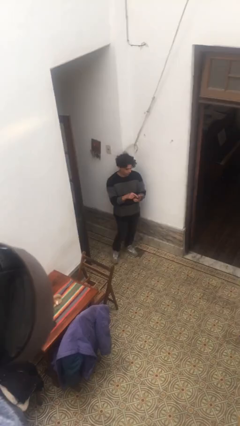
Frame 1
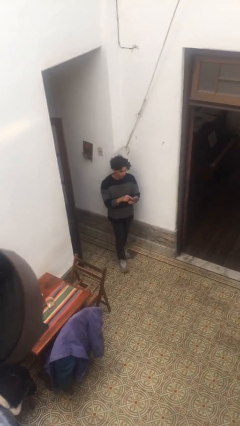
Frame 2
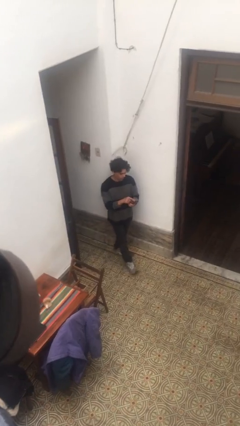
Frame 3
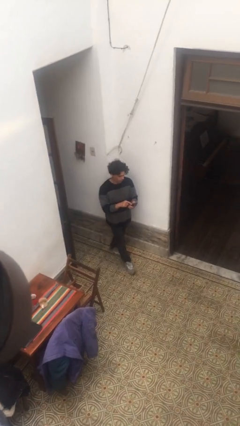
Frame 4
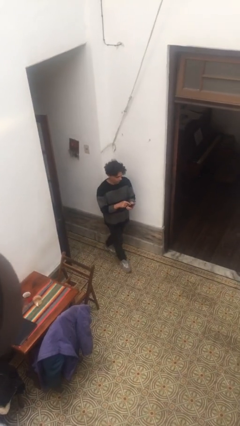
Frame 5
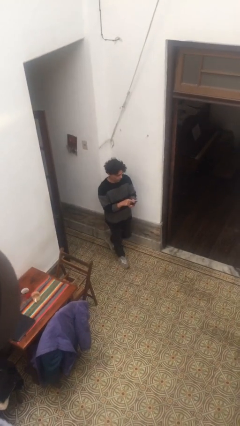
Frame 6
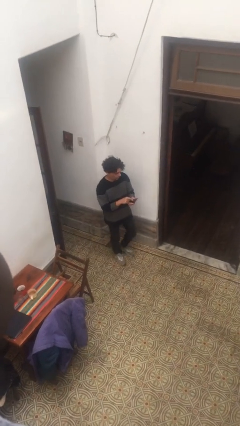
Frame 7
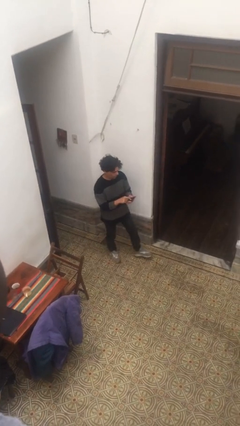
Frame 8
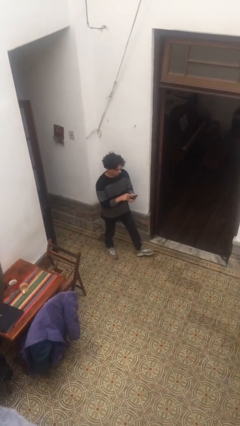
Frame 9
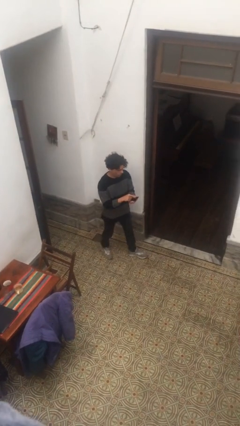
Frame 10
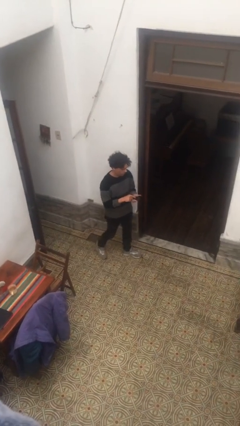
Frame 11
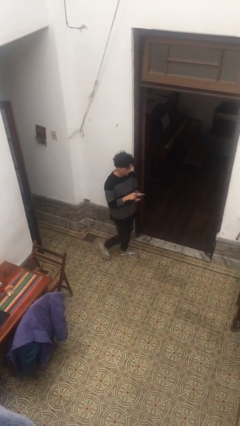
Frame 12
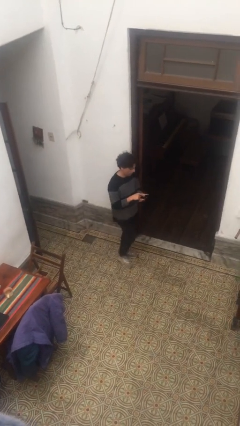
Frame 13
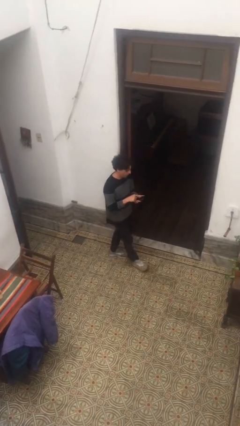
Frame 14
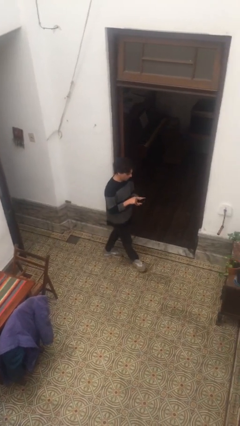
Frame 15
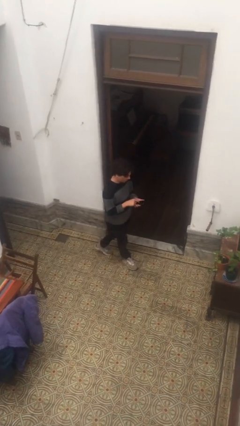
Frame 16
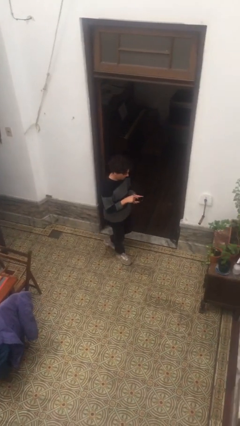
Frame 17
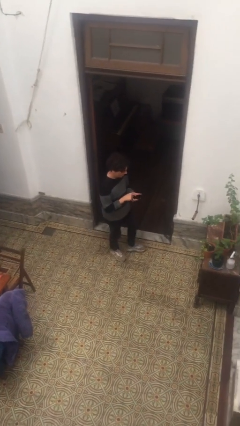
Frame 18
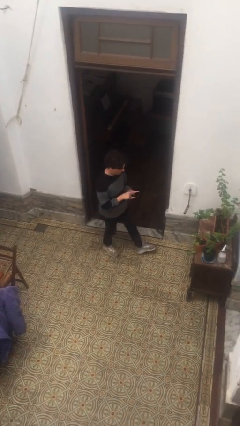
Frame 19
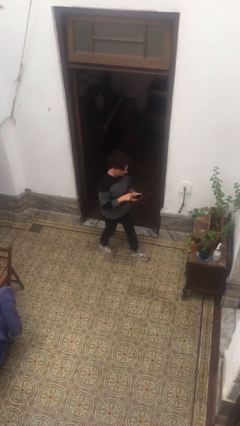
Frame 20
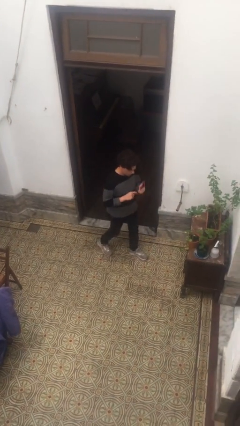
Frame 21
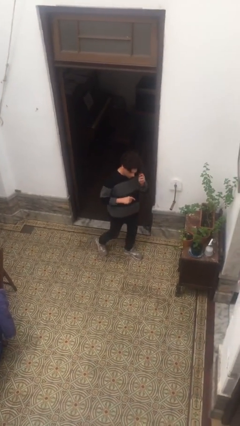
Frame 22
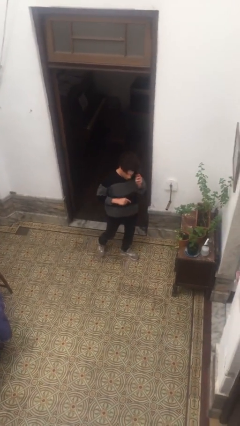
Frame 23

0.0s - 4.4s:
person texts on phone

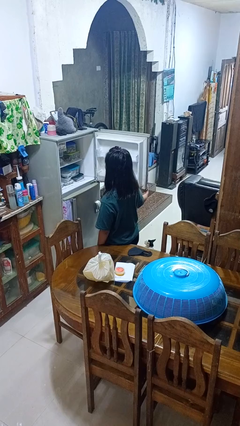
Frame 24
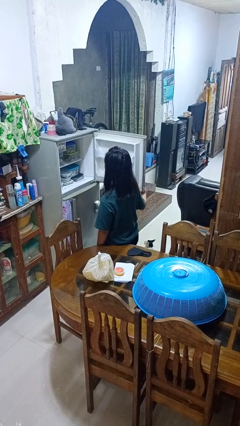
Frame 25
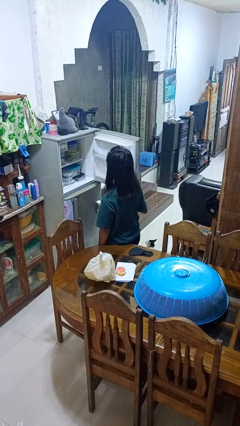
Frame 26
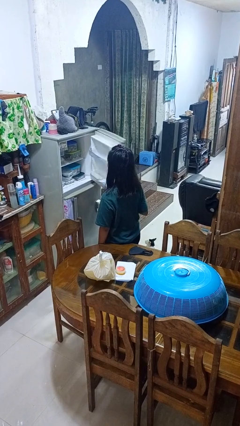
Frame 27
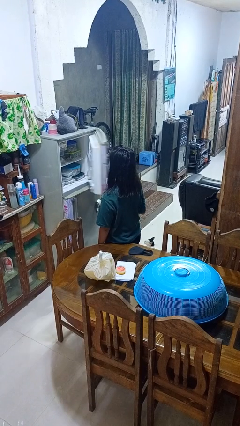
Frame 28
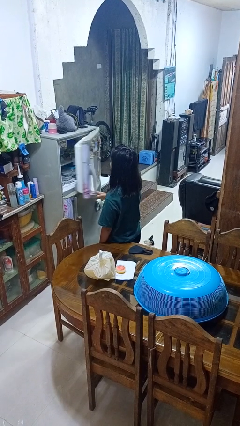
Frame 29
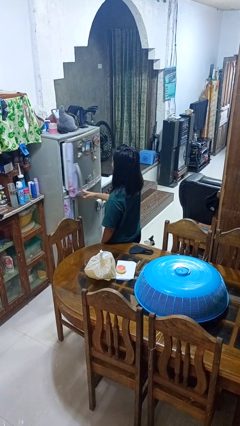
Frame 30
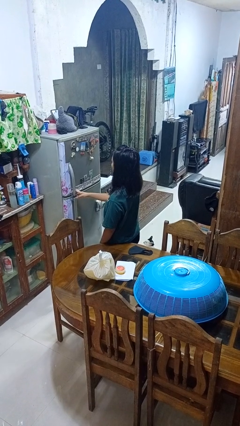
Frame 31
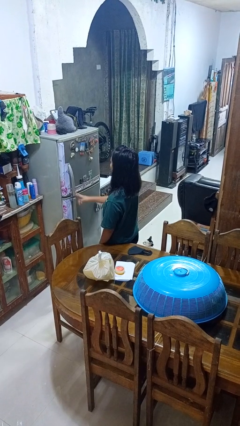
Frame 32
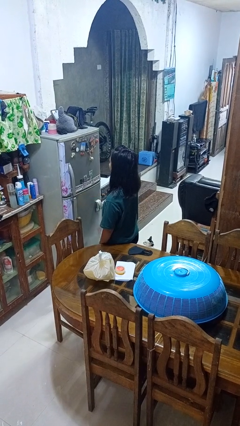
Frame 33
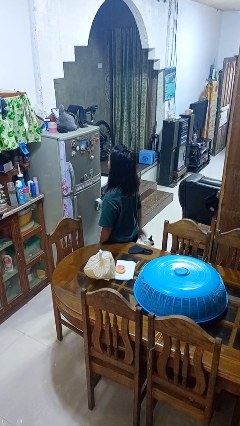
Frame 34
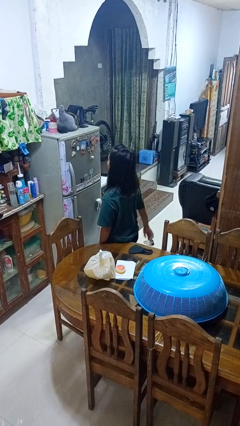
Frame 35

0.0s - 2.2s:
person closes refrigerator

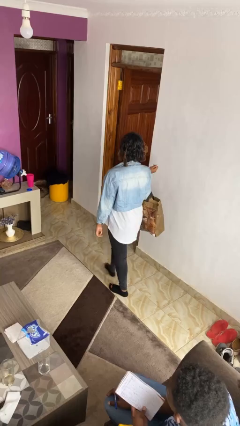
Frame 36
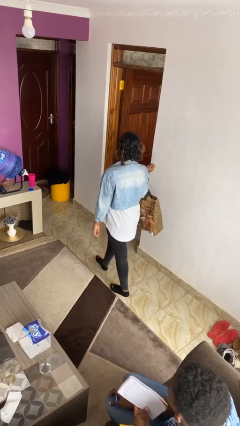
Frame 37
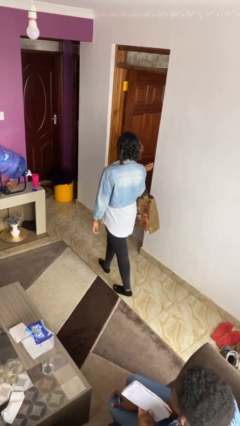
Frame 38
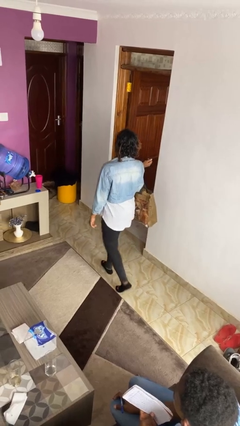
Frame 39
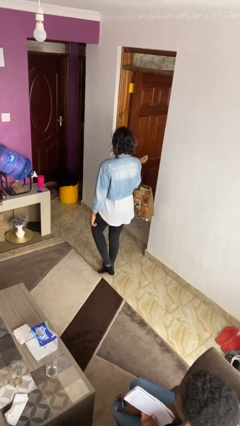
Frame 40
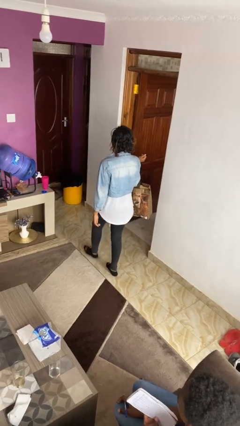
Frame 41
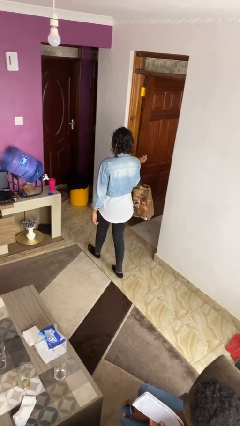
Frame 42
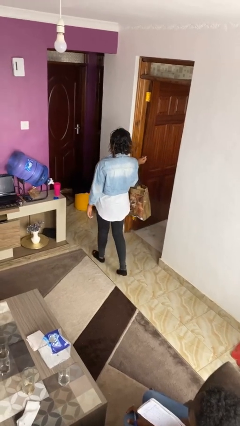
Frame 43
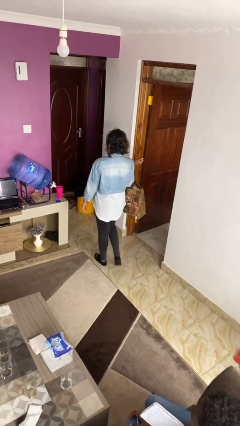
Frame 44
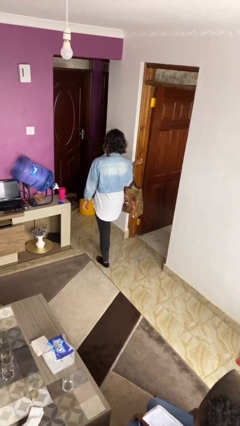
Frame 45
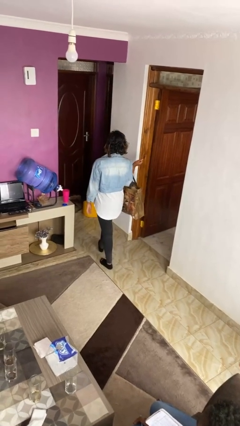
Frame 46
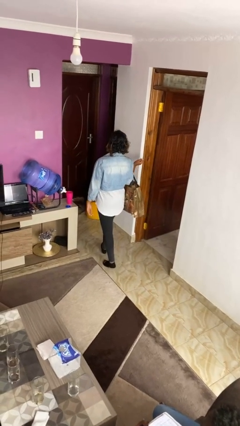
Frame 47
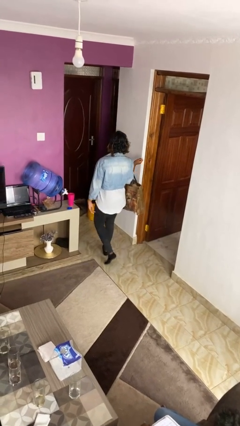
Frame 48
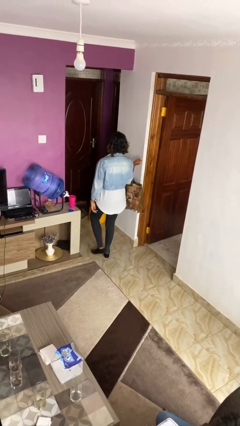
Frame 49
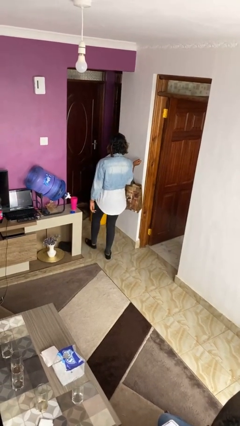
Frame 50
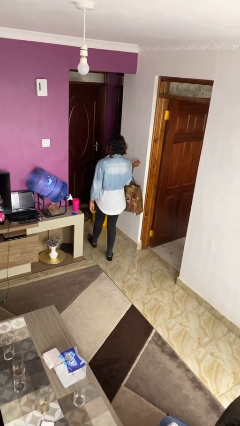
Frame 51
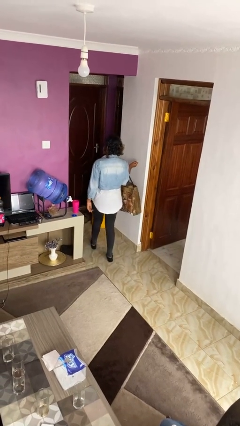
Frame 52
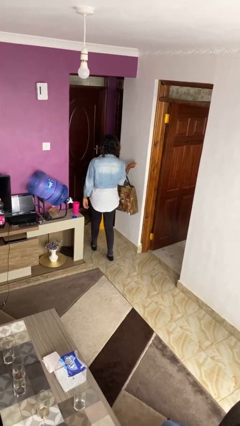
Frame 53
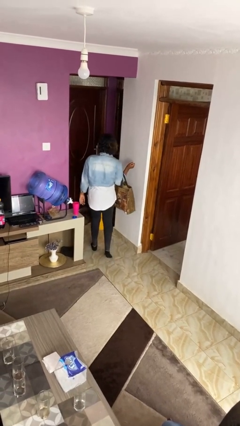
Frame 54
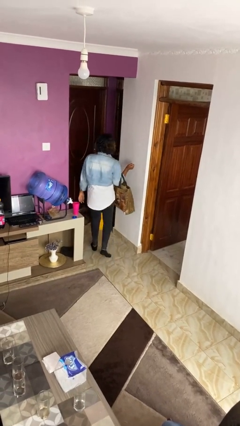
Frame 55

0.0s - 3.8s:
person carries groceries

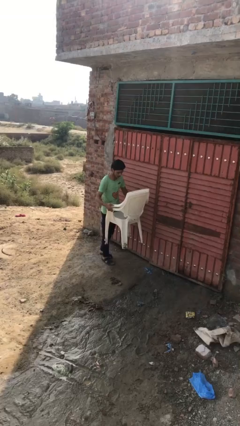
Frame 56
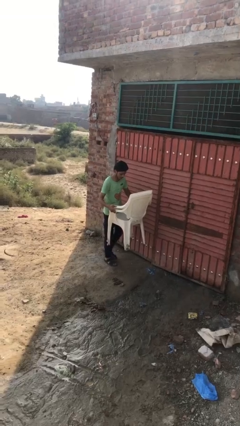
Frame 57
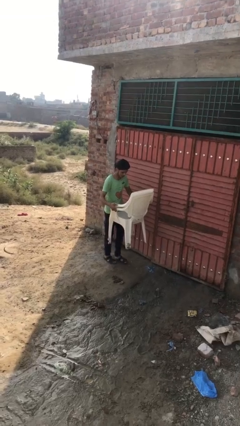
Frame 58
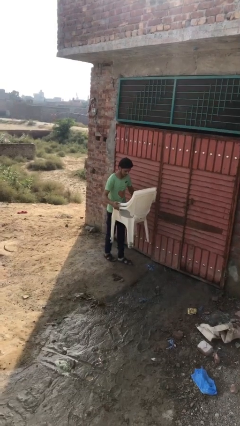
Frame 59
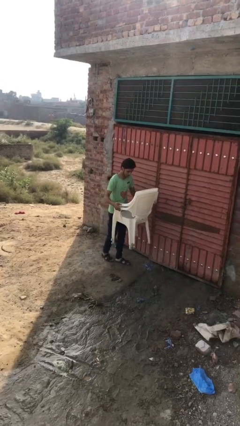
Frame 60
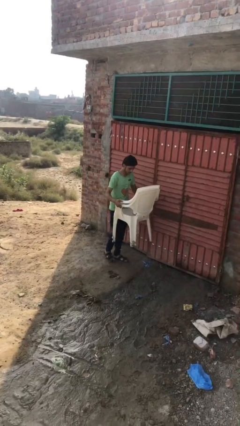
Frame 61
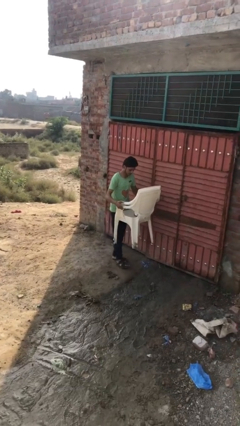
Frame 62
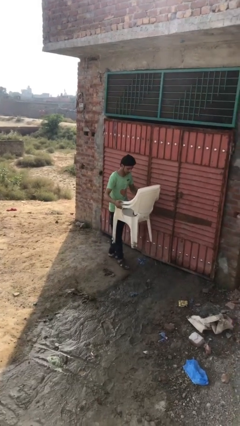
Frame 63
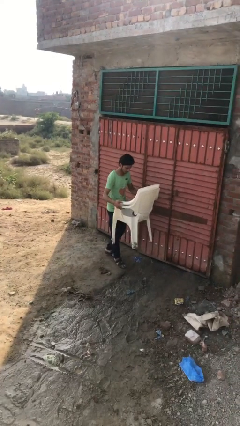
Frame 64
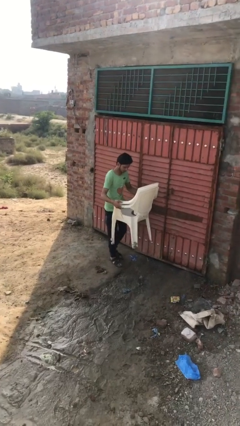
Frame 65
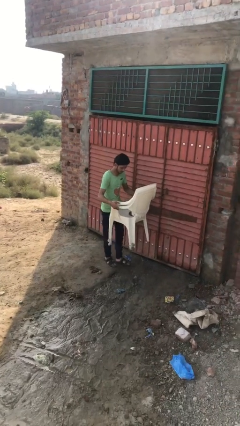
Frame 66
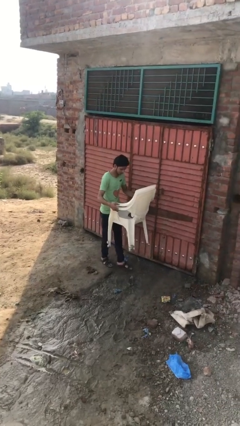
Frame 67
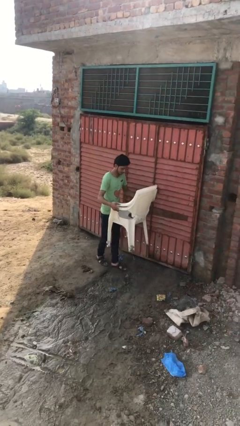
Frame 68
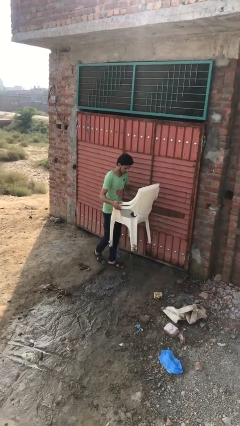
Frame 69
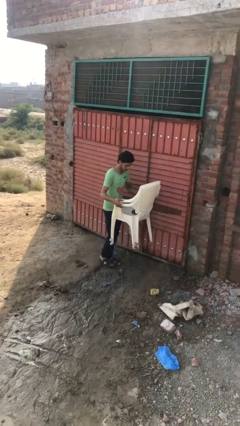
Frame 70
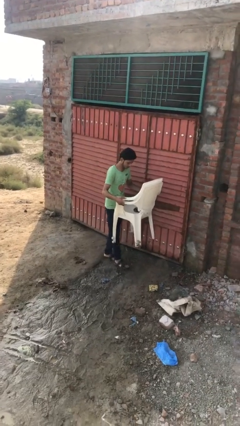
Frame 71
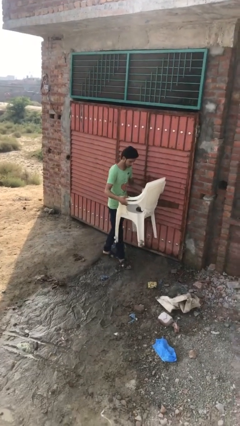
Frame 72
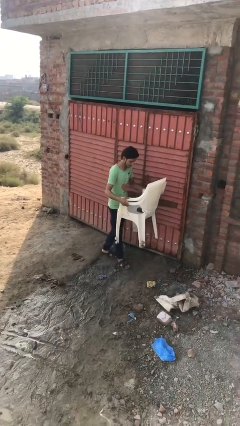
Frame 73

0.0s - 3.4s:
person carries heavy object

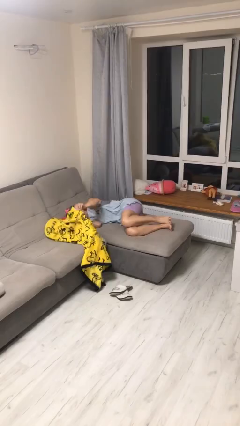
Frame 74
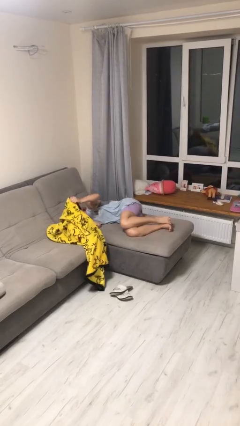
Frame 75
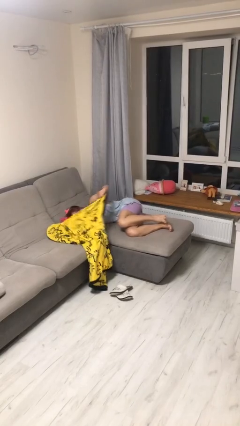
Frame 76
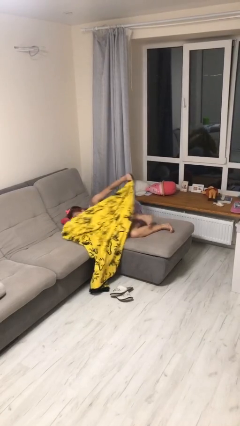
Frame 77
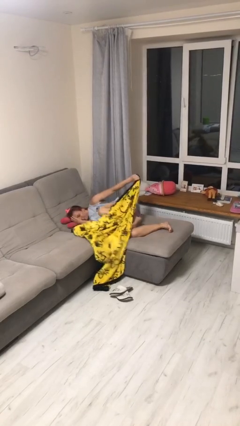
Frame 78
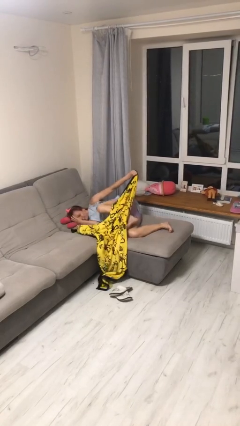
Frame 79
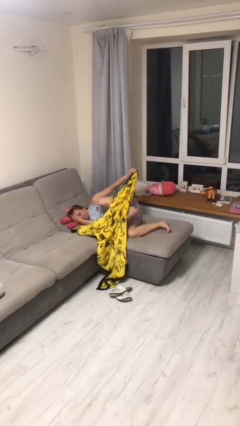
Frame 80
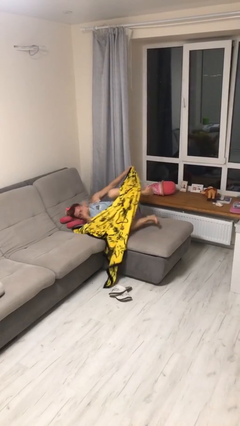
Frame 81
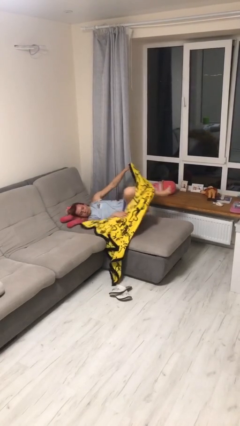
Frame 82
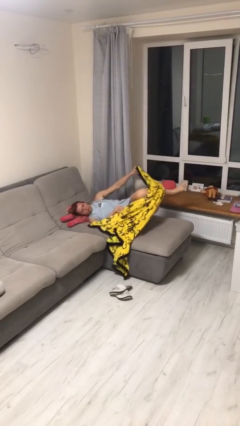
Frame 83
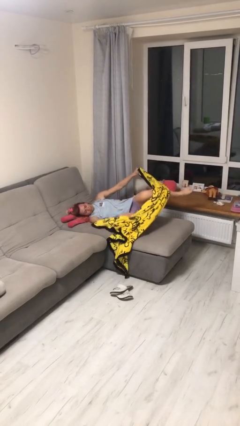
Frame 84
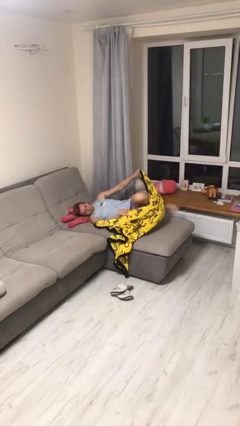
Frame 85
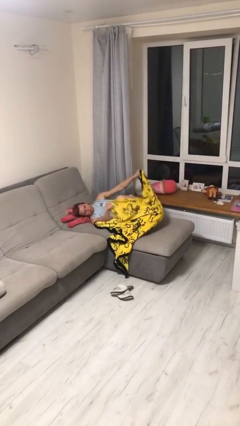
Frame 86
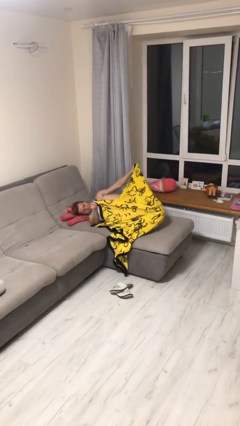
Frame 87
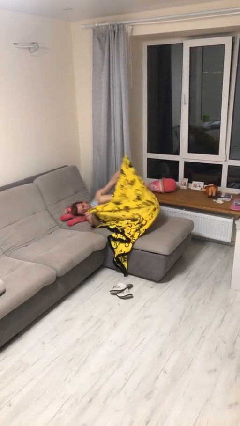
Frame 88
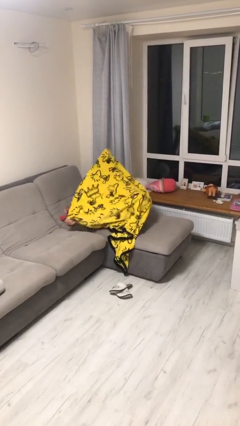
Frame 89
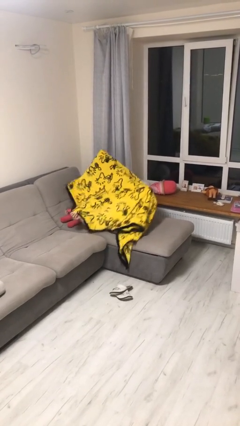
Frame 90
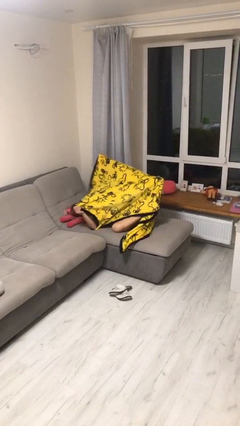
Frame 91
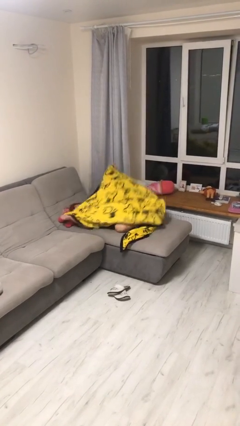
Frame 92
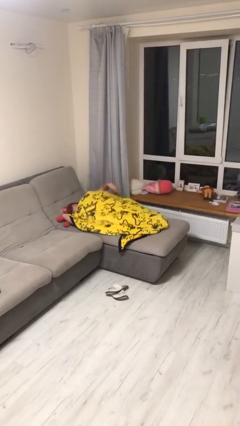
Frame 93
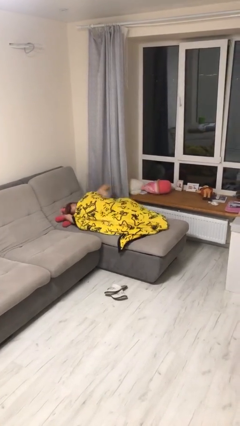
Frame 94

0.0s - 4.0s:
person covers with bedsheets
